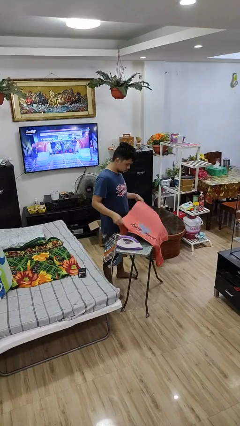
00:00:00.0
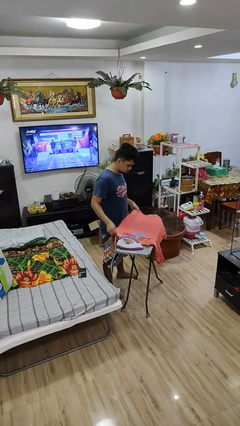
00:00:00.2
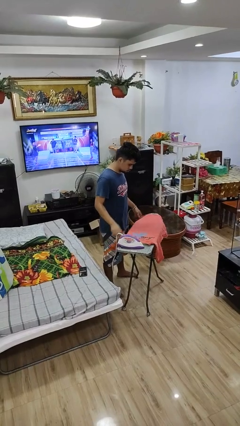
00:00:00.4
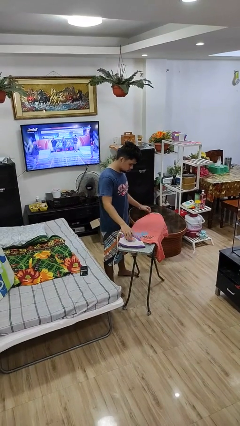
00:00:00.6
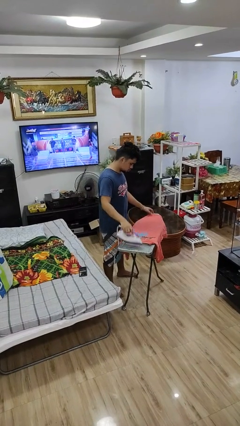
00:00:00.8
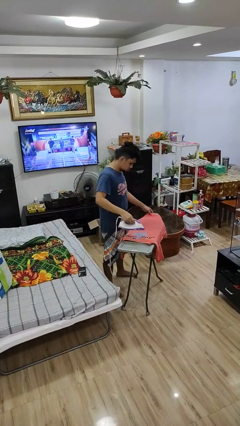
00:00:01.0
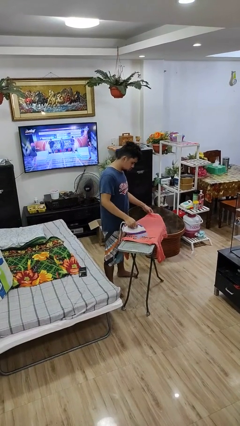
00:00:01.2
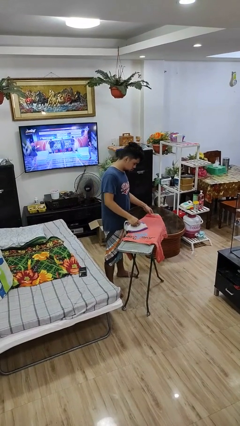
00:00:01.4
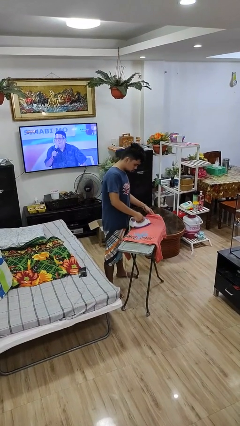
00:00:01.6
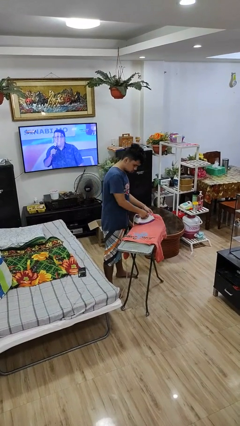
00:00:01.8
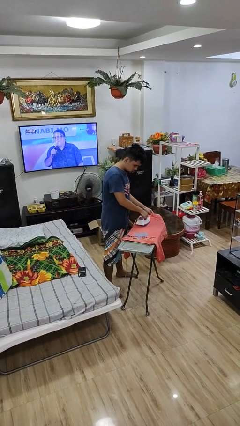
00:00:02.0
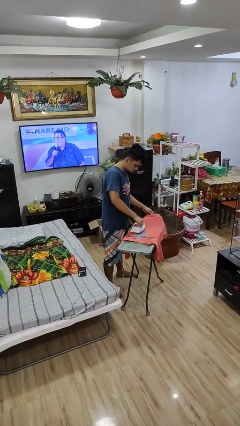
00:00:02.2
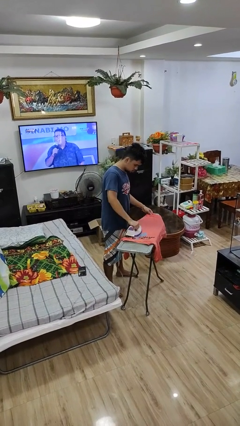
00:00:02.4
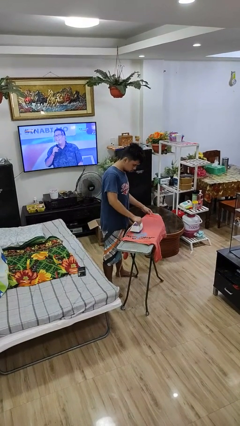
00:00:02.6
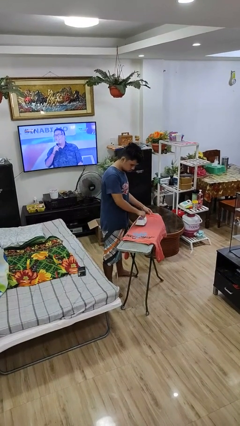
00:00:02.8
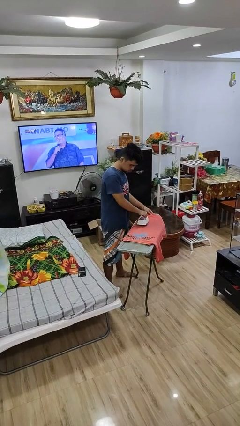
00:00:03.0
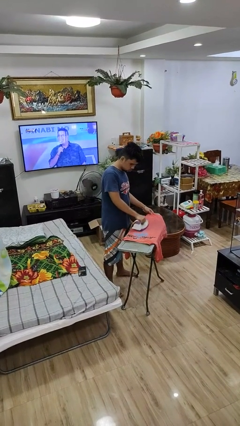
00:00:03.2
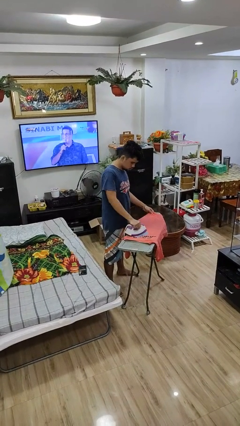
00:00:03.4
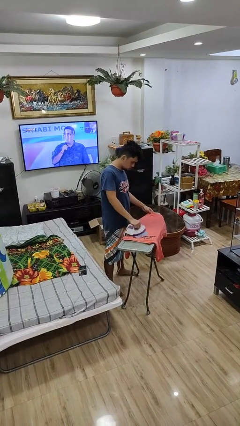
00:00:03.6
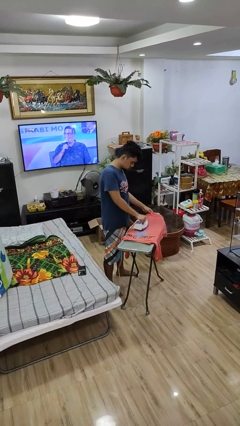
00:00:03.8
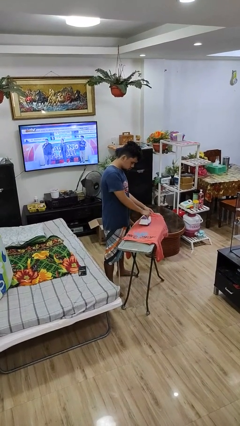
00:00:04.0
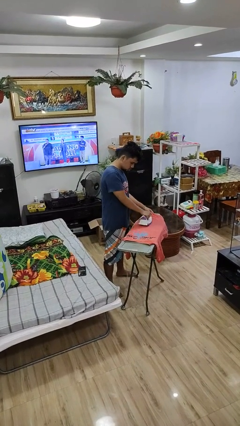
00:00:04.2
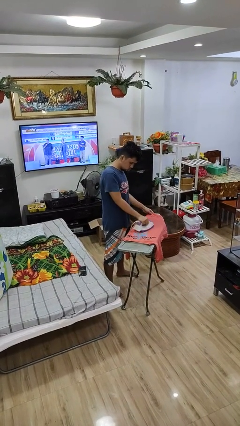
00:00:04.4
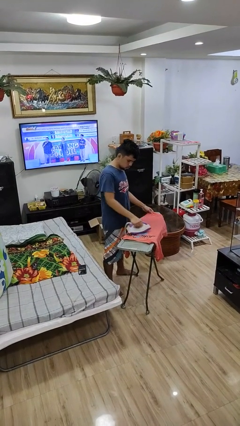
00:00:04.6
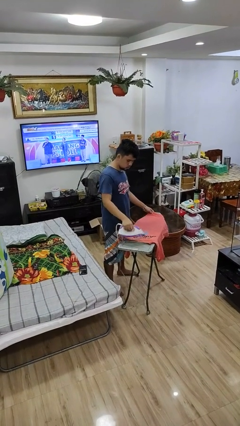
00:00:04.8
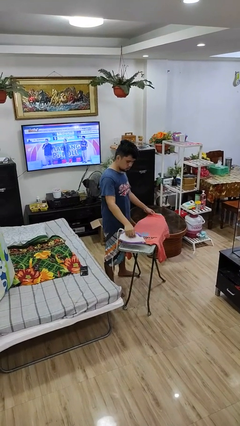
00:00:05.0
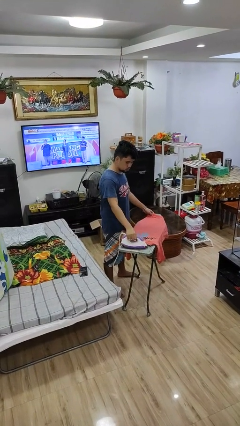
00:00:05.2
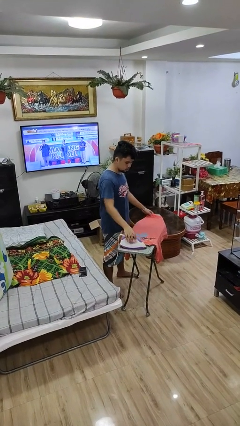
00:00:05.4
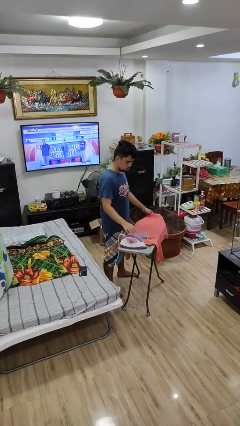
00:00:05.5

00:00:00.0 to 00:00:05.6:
person irons clothes

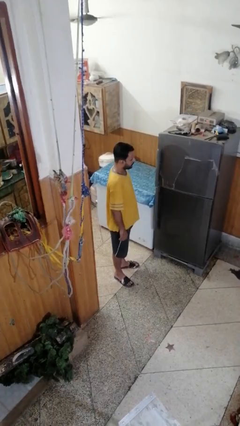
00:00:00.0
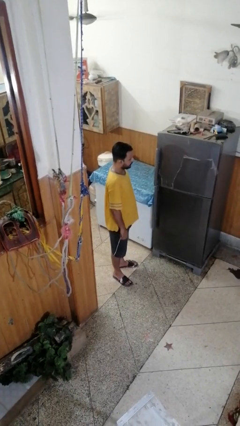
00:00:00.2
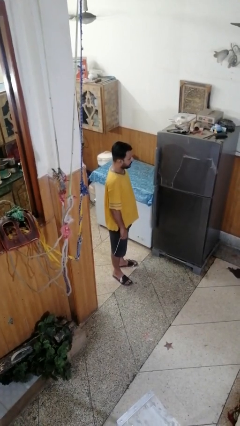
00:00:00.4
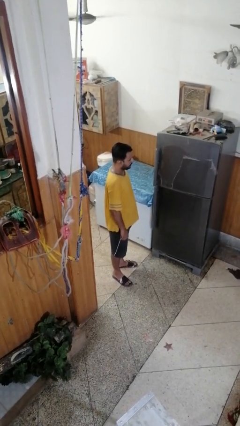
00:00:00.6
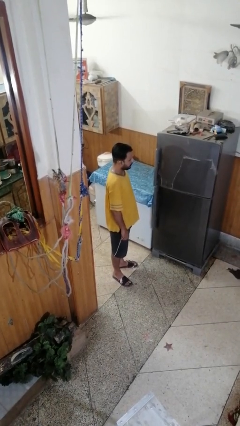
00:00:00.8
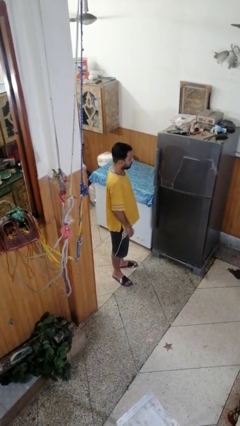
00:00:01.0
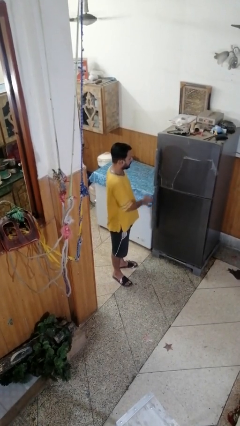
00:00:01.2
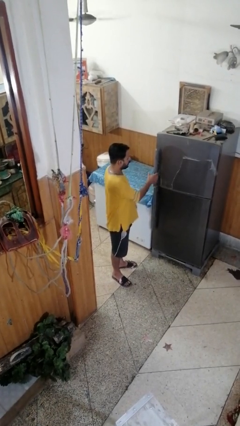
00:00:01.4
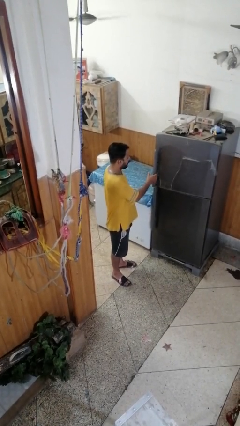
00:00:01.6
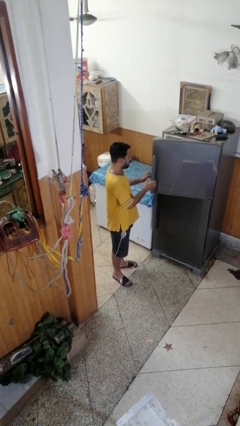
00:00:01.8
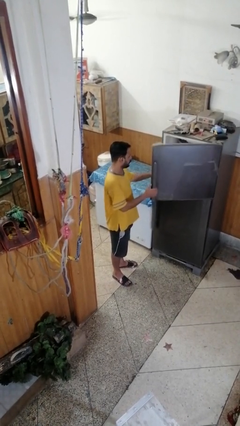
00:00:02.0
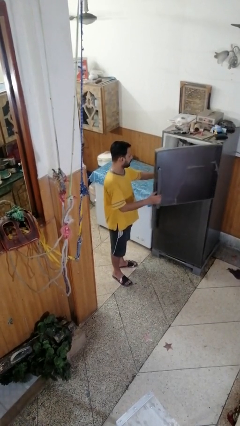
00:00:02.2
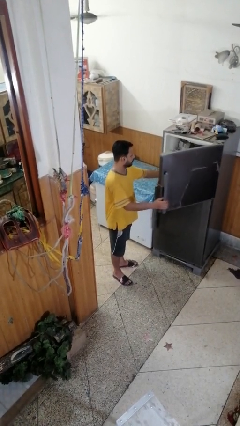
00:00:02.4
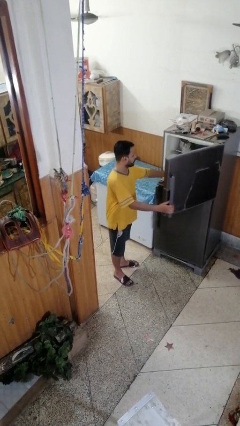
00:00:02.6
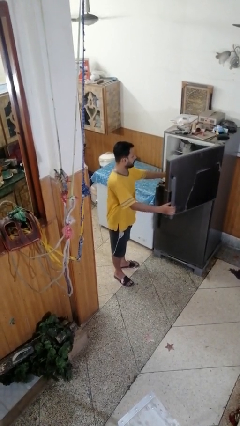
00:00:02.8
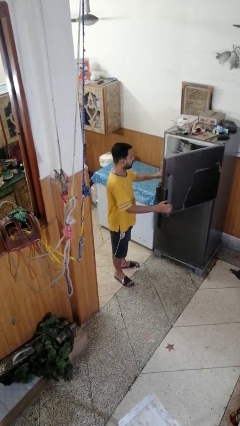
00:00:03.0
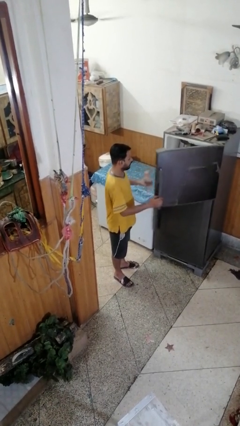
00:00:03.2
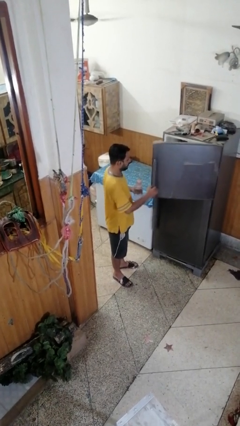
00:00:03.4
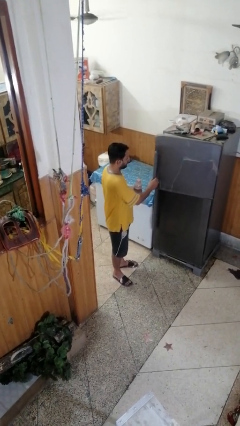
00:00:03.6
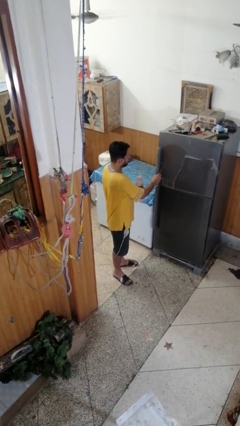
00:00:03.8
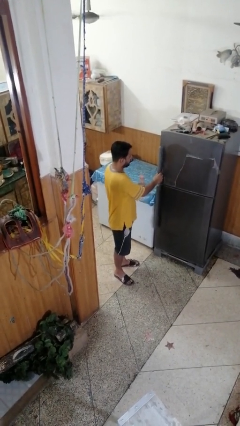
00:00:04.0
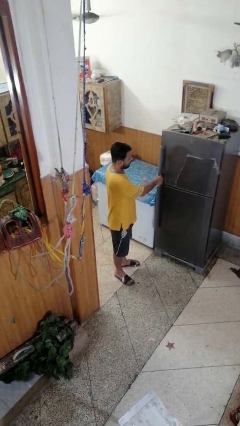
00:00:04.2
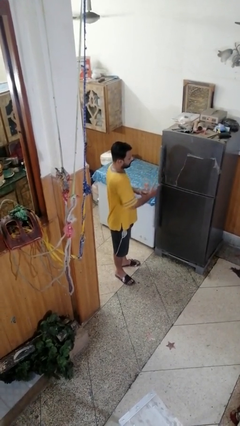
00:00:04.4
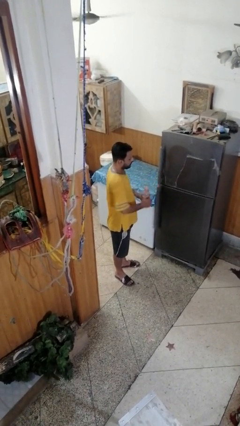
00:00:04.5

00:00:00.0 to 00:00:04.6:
person takes object from refrigerator

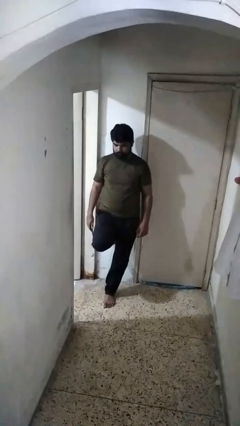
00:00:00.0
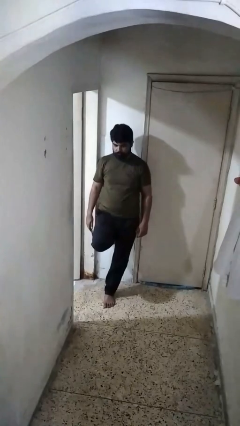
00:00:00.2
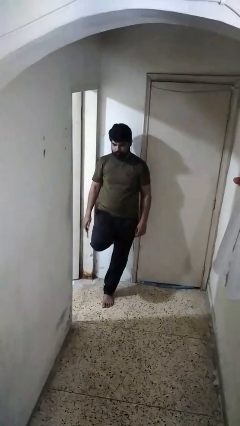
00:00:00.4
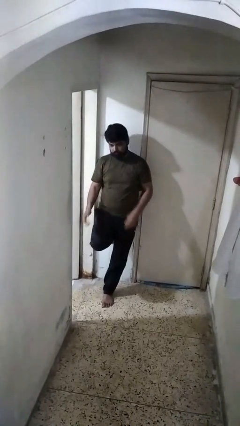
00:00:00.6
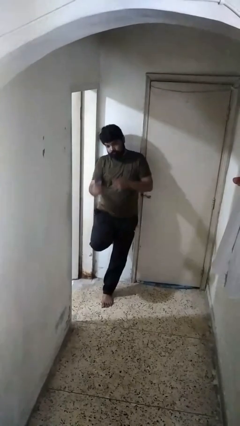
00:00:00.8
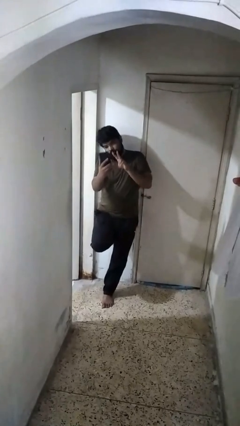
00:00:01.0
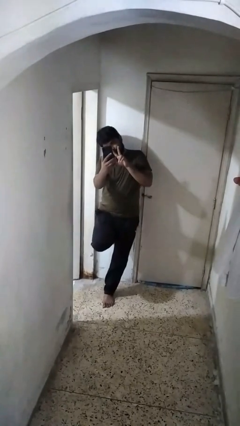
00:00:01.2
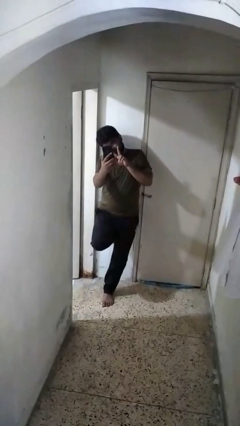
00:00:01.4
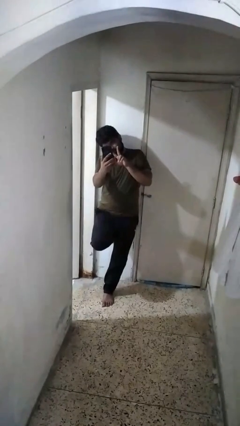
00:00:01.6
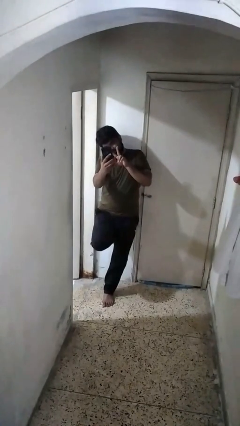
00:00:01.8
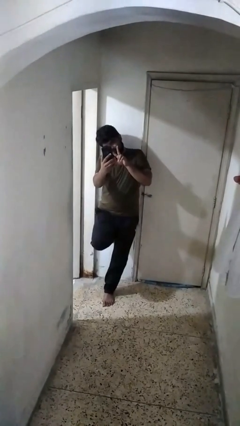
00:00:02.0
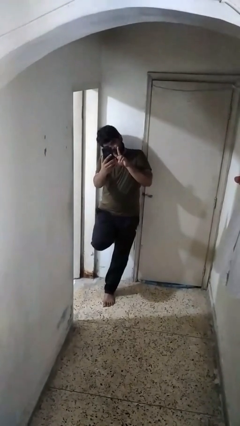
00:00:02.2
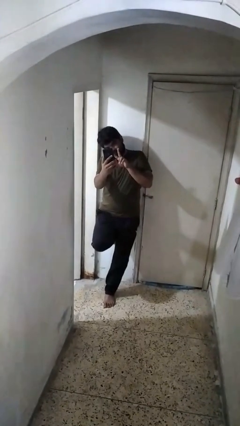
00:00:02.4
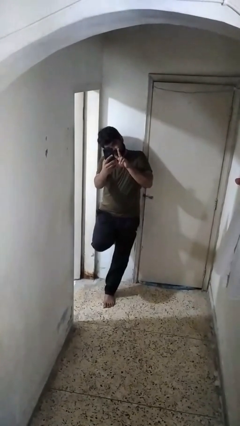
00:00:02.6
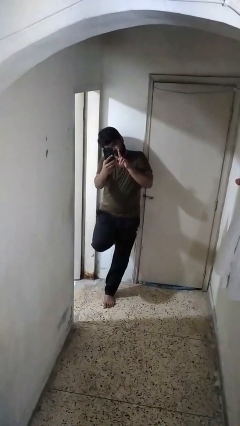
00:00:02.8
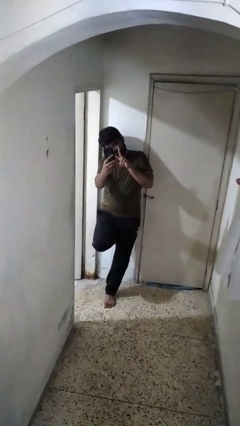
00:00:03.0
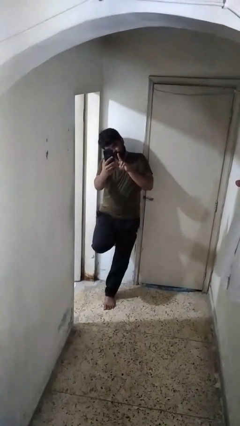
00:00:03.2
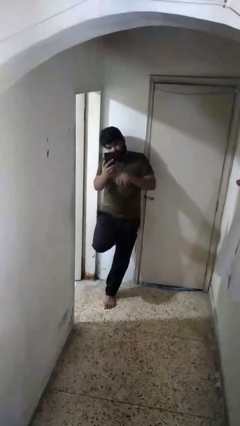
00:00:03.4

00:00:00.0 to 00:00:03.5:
person takes selfie

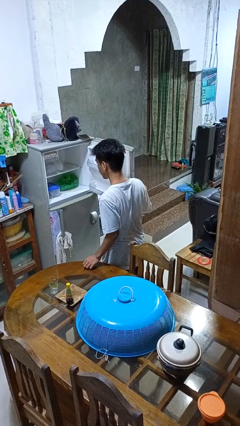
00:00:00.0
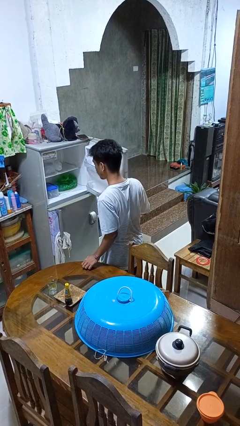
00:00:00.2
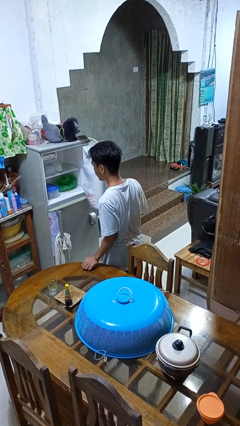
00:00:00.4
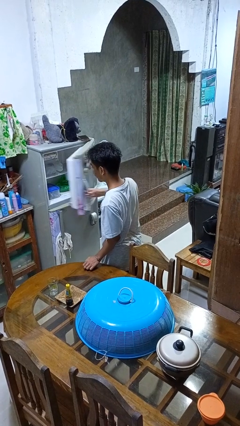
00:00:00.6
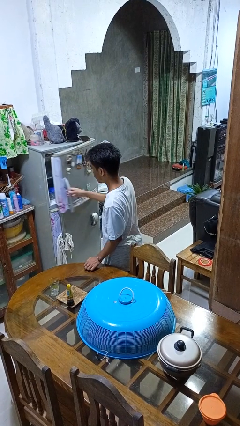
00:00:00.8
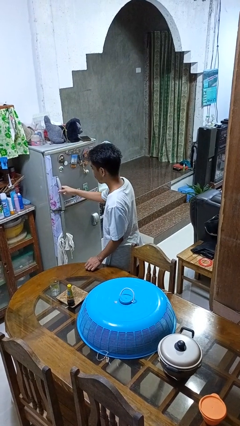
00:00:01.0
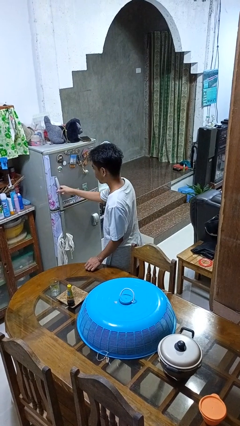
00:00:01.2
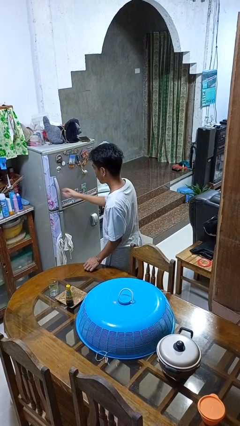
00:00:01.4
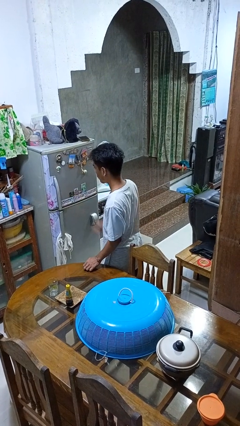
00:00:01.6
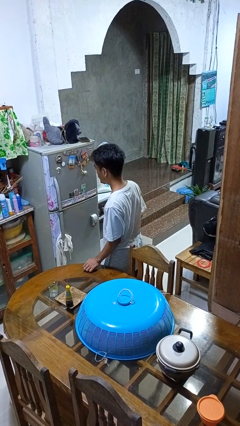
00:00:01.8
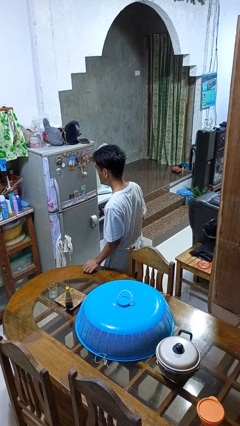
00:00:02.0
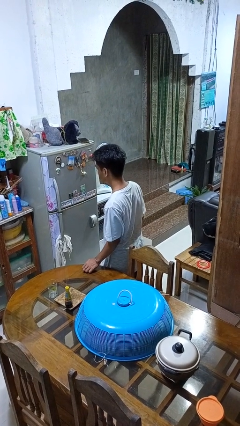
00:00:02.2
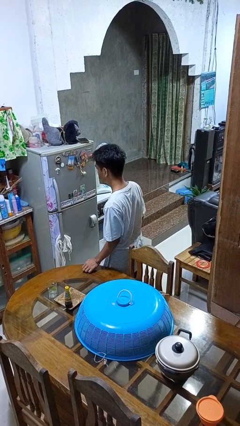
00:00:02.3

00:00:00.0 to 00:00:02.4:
person closes refrigerator

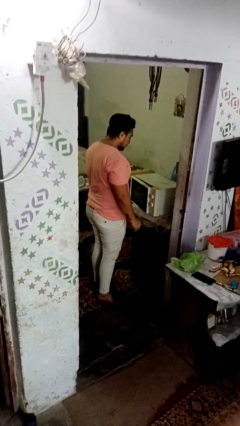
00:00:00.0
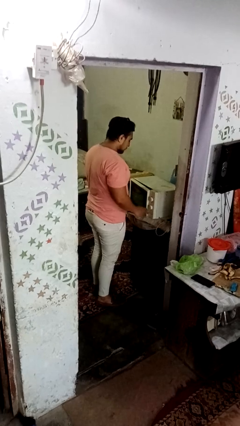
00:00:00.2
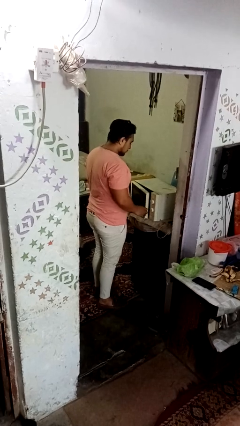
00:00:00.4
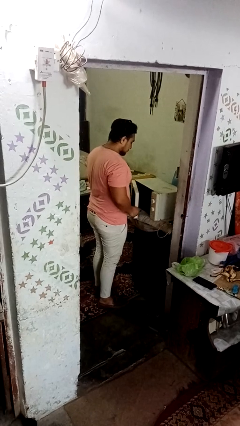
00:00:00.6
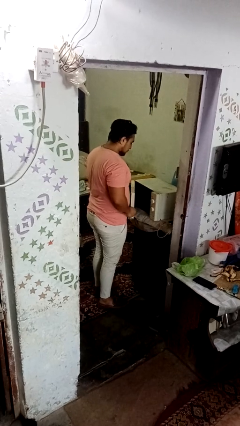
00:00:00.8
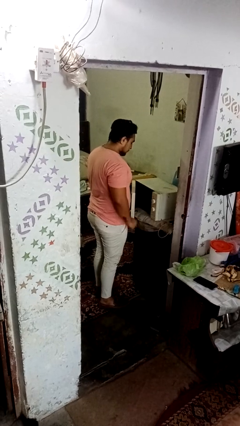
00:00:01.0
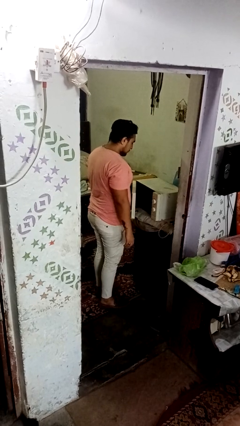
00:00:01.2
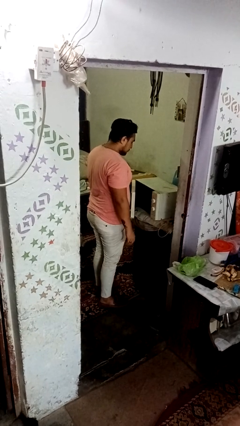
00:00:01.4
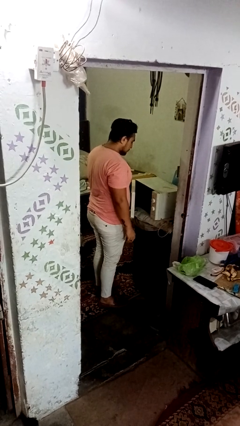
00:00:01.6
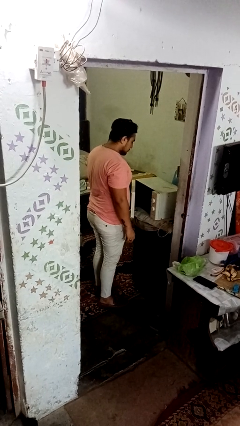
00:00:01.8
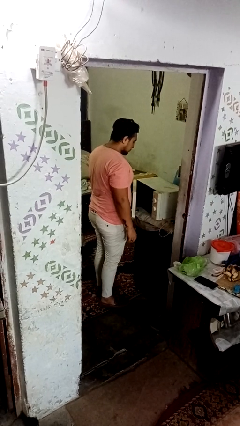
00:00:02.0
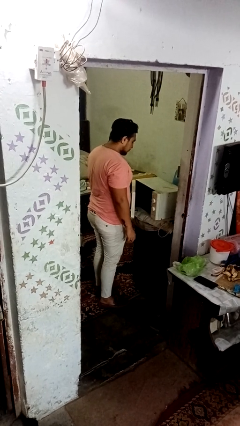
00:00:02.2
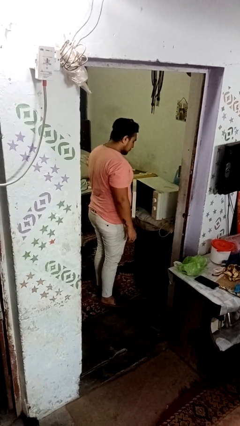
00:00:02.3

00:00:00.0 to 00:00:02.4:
person opens dishwasher
